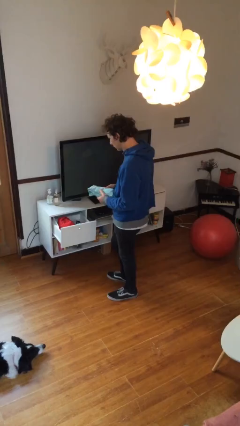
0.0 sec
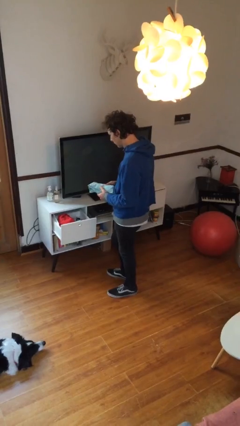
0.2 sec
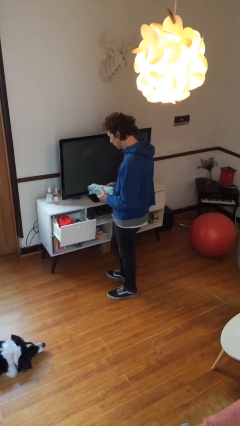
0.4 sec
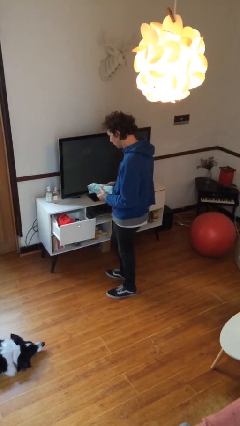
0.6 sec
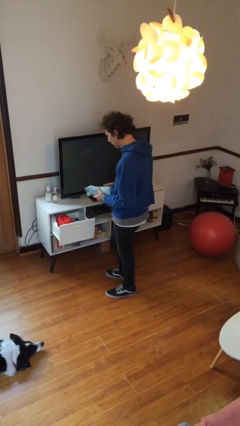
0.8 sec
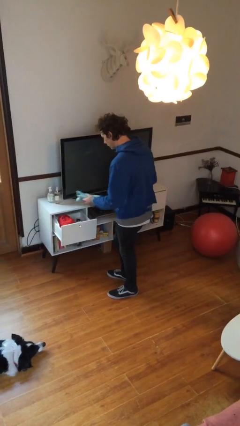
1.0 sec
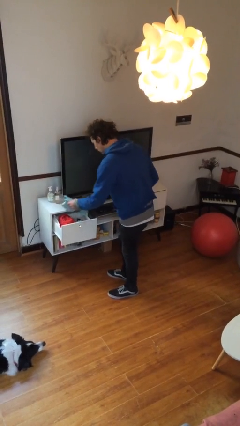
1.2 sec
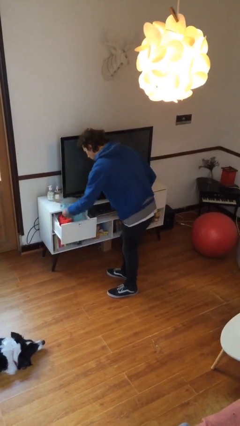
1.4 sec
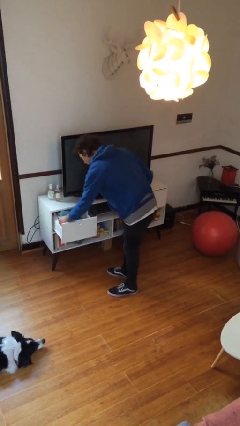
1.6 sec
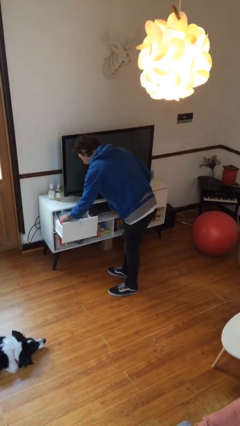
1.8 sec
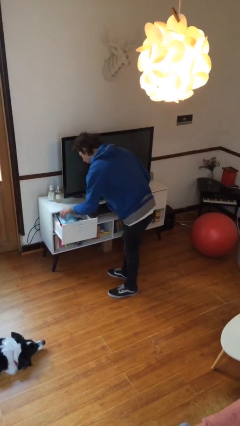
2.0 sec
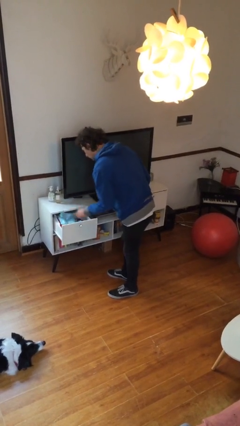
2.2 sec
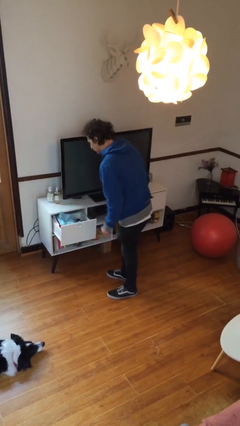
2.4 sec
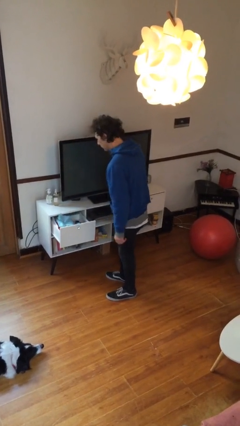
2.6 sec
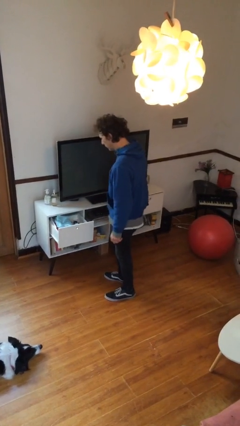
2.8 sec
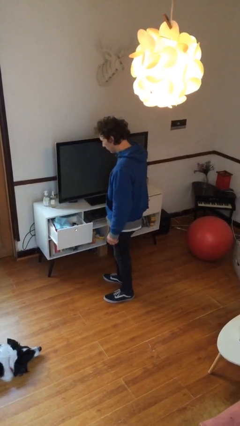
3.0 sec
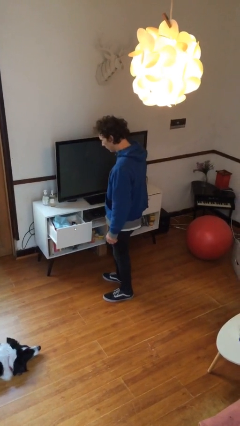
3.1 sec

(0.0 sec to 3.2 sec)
person puts clothes into dresser

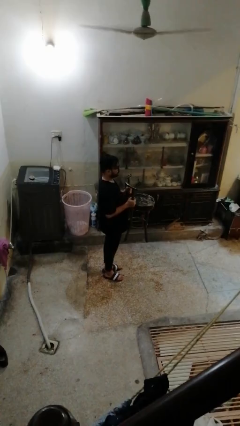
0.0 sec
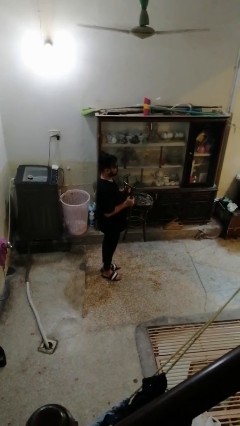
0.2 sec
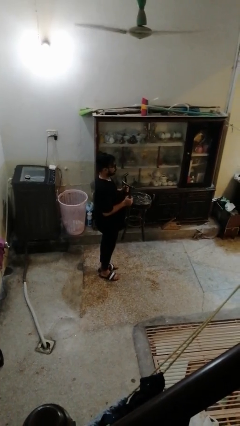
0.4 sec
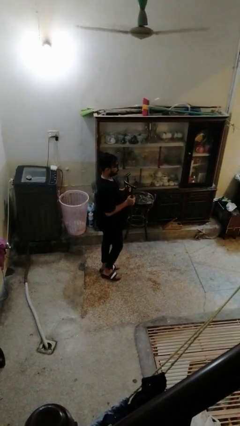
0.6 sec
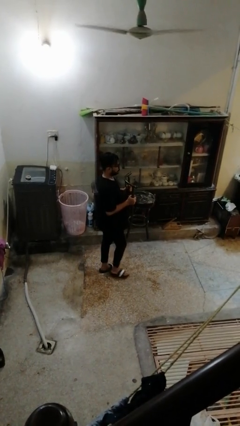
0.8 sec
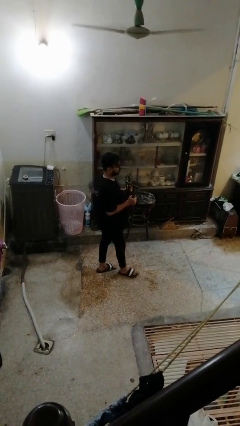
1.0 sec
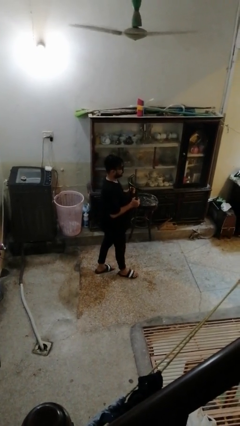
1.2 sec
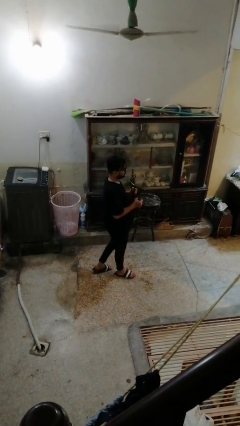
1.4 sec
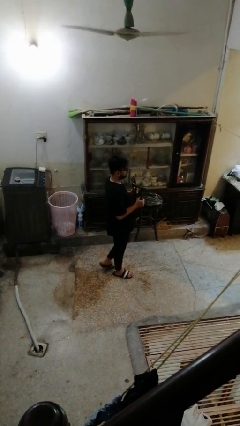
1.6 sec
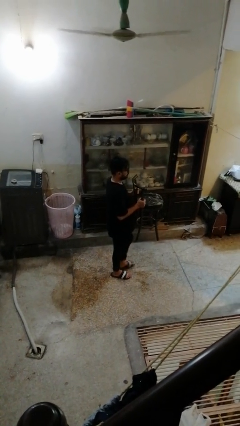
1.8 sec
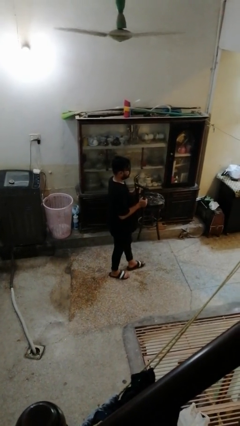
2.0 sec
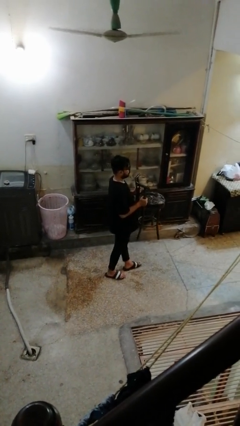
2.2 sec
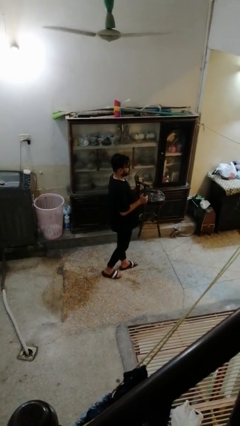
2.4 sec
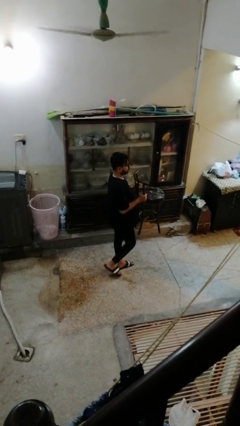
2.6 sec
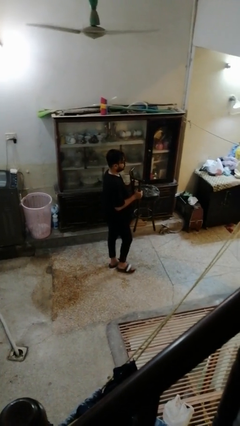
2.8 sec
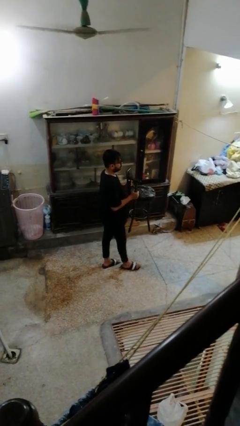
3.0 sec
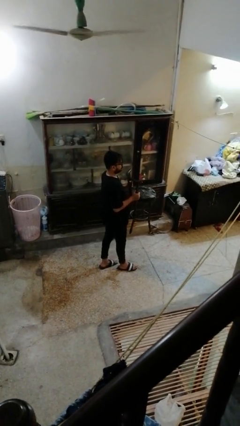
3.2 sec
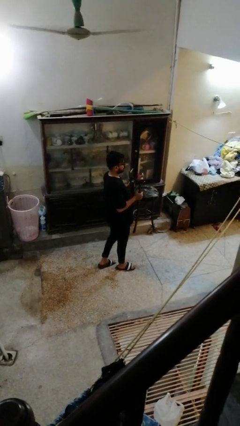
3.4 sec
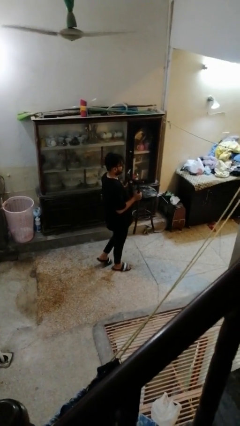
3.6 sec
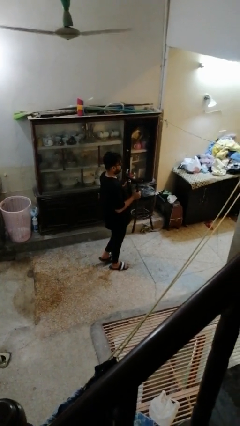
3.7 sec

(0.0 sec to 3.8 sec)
person carries furniture

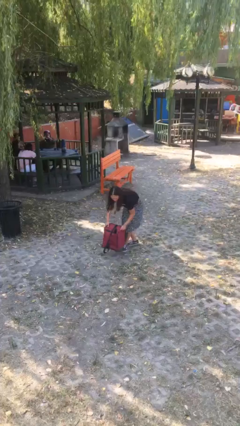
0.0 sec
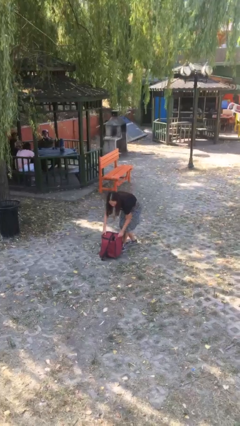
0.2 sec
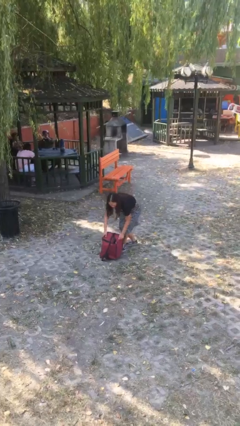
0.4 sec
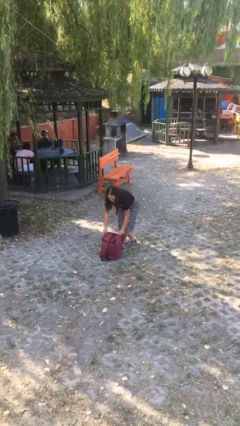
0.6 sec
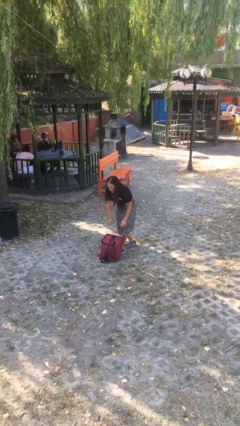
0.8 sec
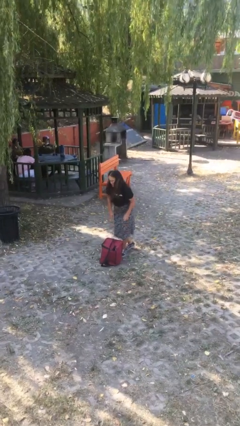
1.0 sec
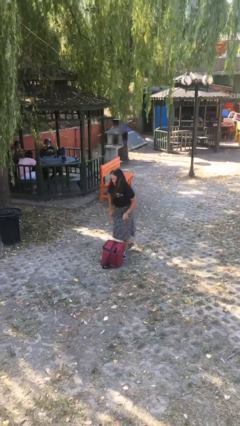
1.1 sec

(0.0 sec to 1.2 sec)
person puts down object on floor

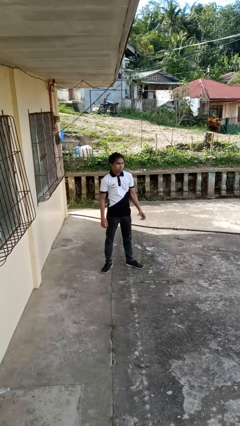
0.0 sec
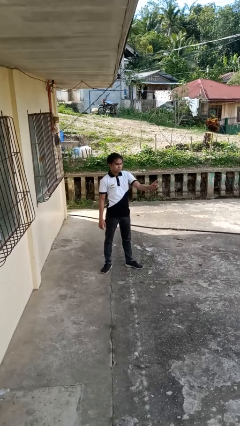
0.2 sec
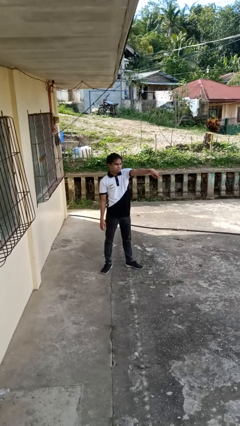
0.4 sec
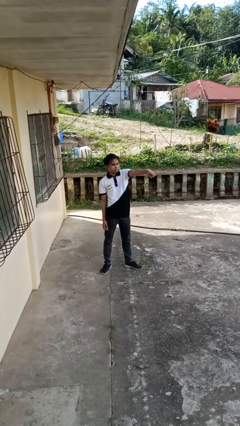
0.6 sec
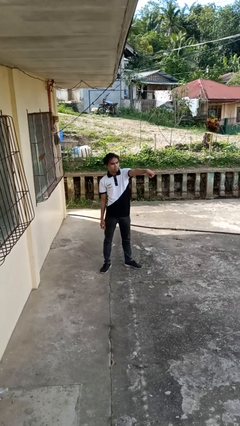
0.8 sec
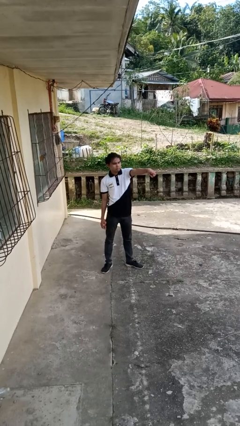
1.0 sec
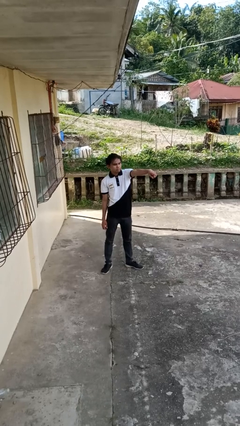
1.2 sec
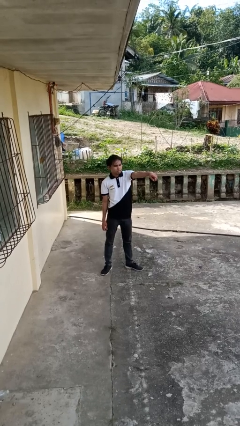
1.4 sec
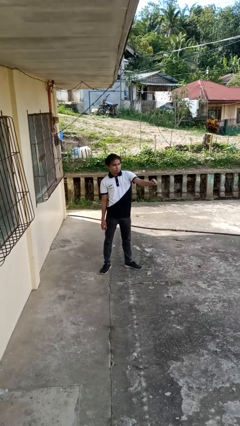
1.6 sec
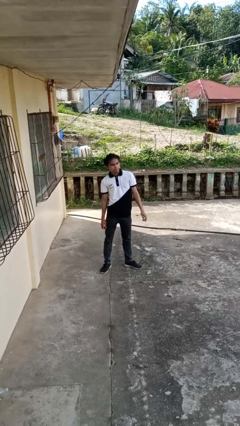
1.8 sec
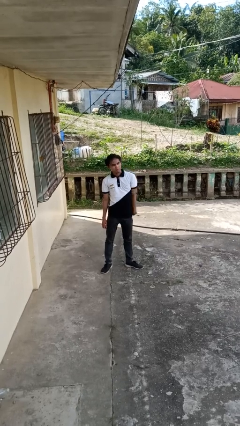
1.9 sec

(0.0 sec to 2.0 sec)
person points at person

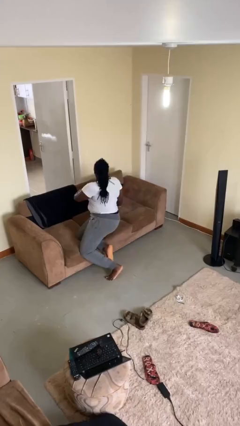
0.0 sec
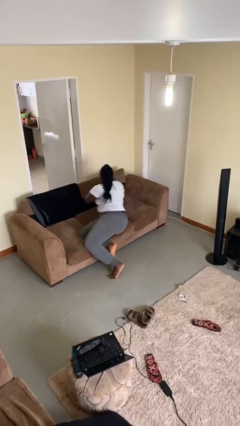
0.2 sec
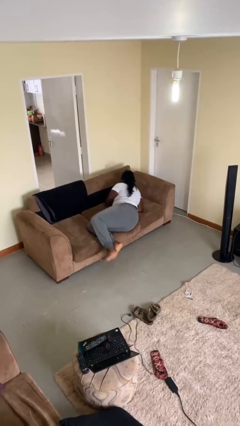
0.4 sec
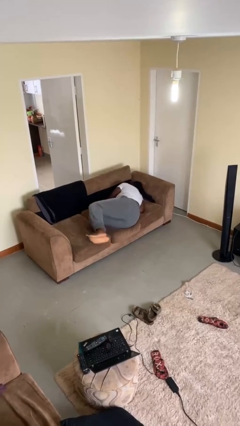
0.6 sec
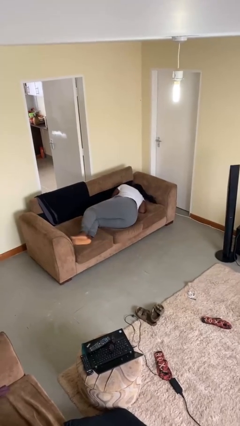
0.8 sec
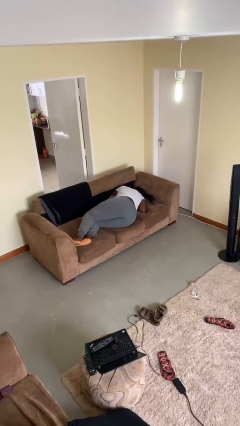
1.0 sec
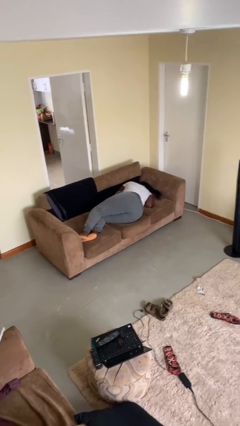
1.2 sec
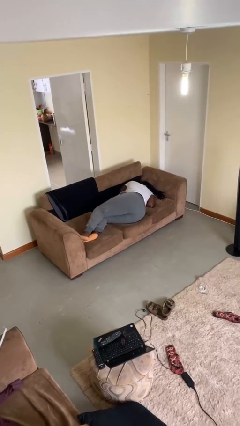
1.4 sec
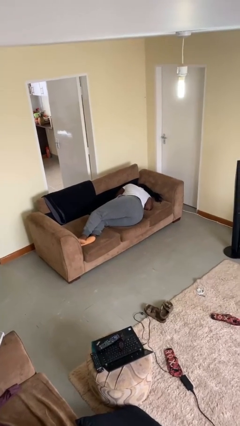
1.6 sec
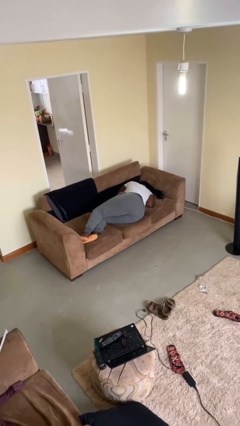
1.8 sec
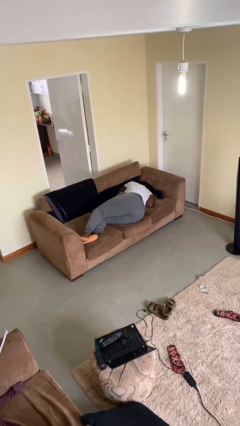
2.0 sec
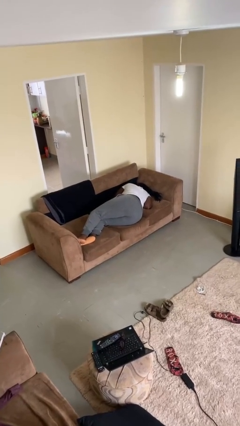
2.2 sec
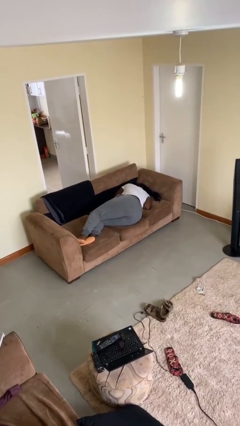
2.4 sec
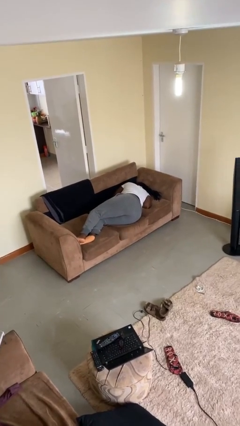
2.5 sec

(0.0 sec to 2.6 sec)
person lies down on couch

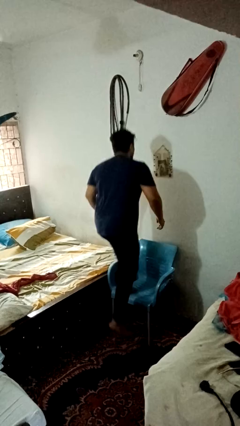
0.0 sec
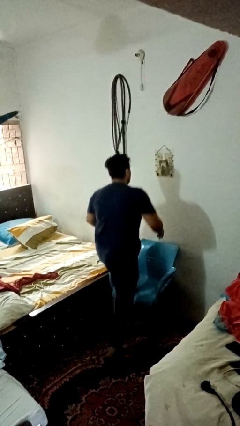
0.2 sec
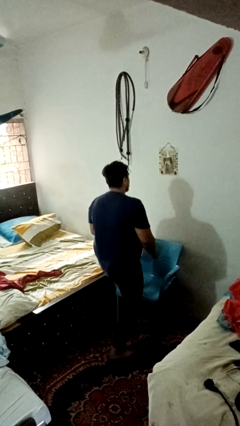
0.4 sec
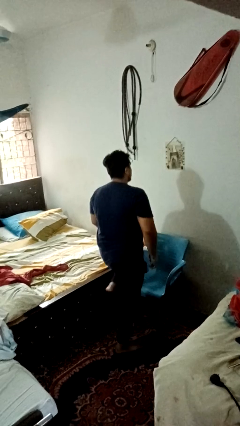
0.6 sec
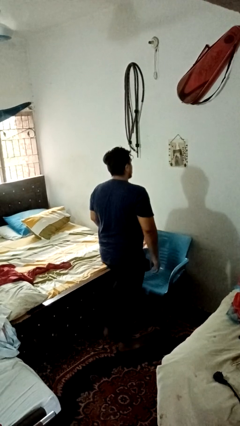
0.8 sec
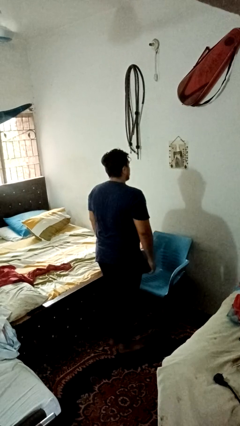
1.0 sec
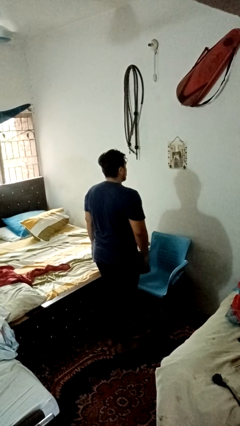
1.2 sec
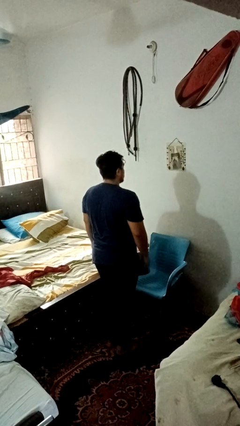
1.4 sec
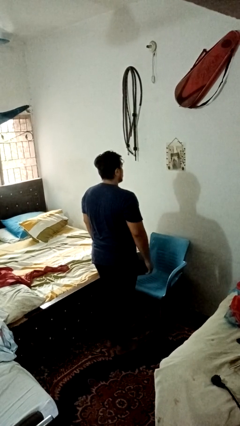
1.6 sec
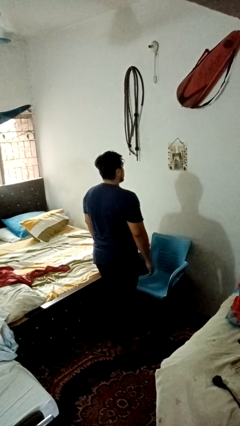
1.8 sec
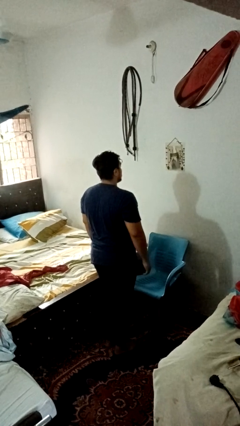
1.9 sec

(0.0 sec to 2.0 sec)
person climbs off chair

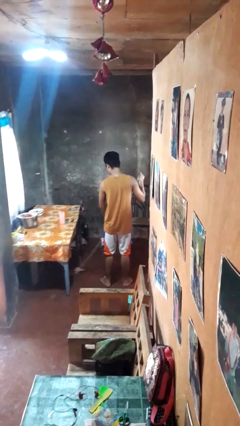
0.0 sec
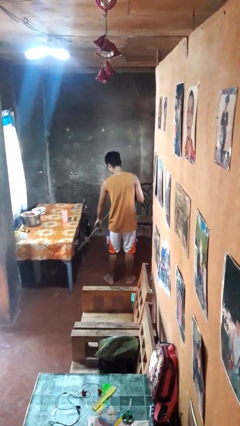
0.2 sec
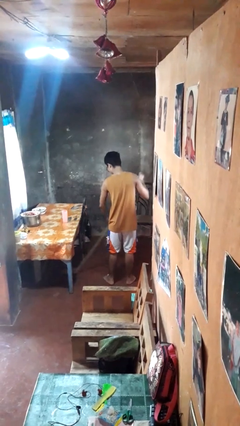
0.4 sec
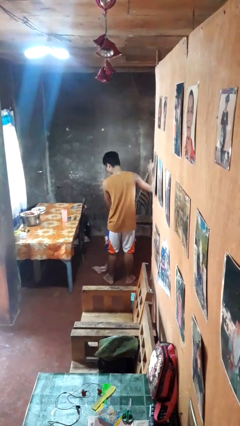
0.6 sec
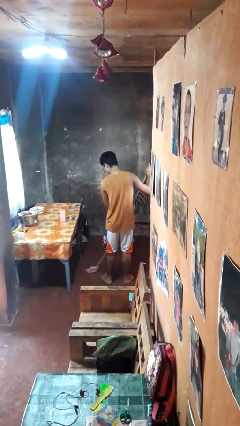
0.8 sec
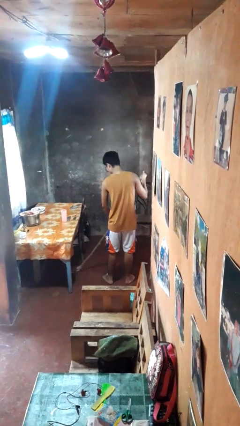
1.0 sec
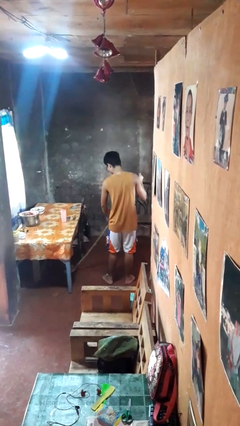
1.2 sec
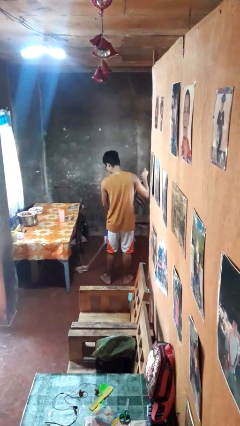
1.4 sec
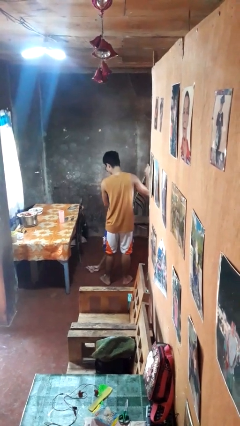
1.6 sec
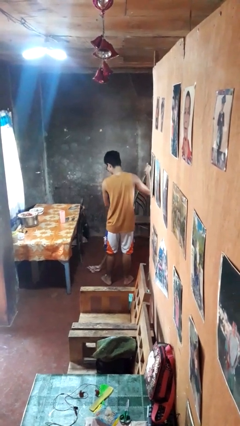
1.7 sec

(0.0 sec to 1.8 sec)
person mops
